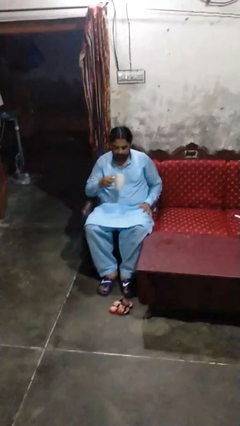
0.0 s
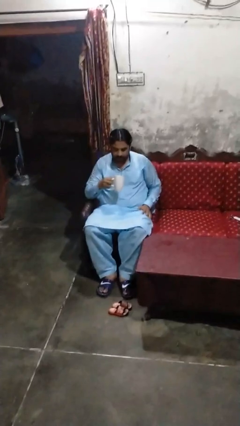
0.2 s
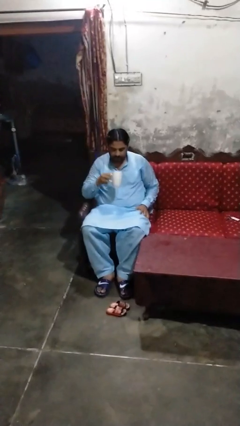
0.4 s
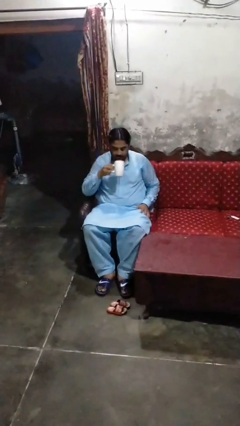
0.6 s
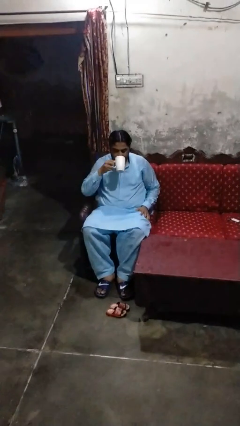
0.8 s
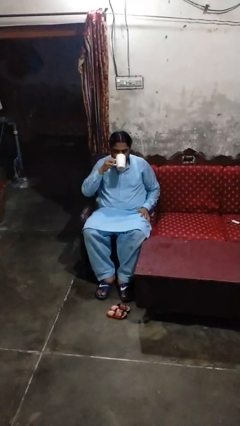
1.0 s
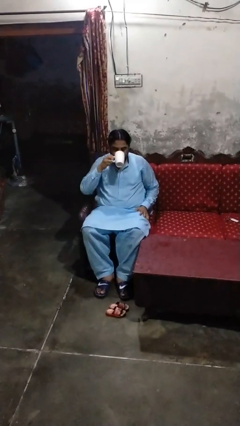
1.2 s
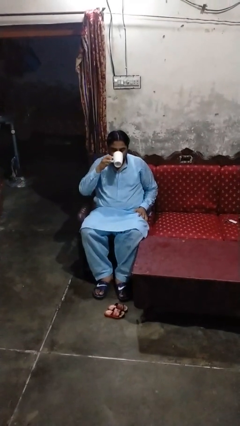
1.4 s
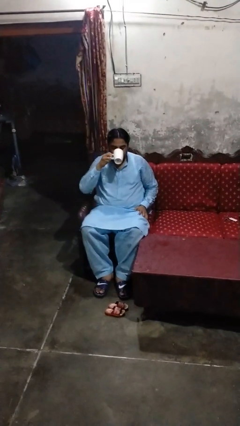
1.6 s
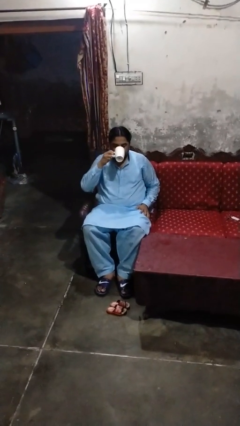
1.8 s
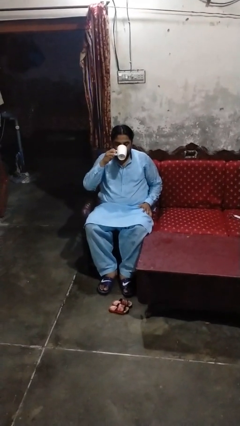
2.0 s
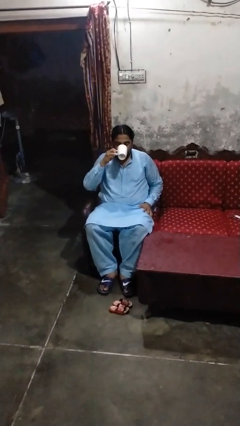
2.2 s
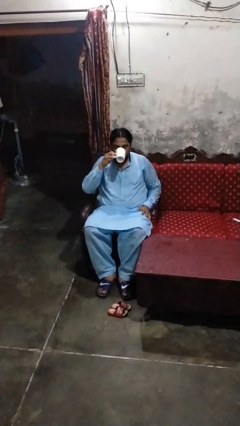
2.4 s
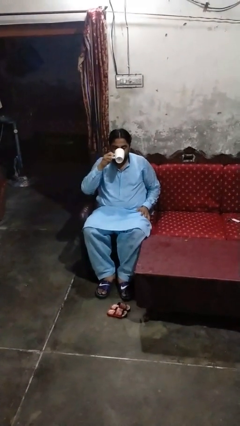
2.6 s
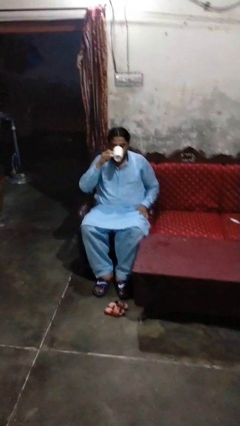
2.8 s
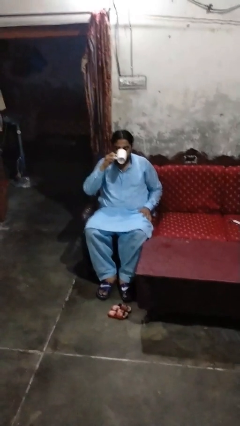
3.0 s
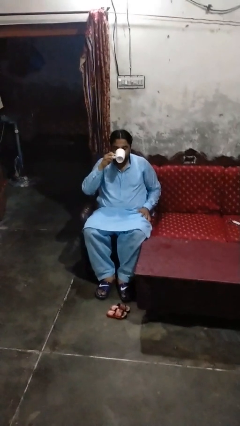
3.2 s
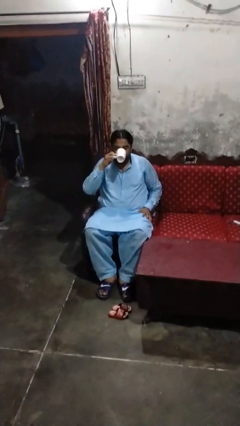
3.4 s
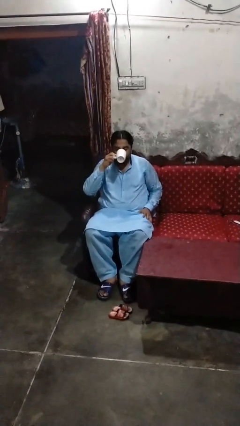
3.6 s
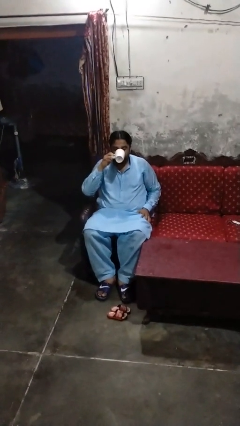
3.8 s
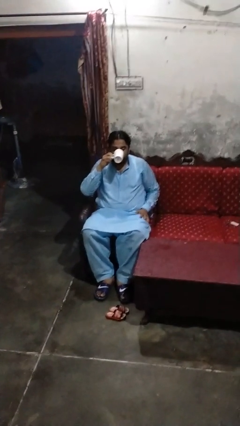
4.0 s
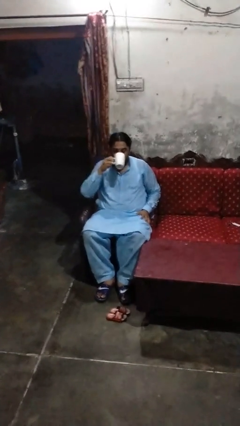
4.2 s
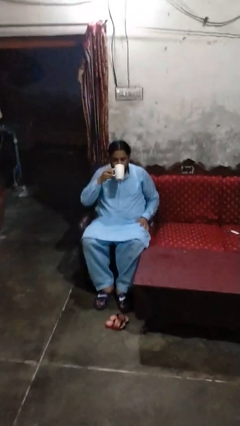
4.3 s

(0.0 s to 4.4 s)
person drinks from mug

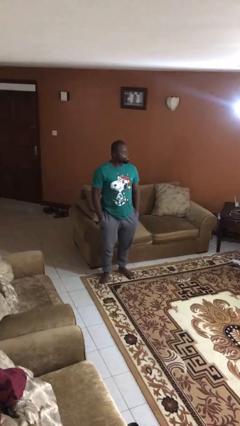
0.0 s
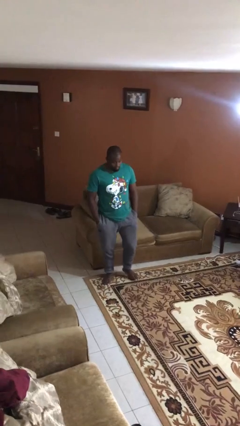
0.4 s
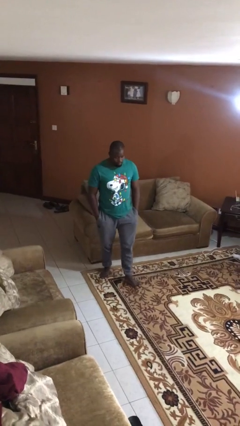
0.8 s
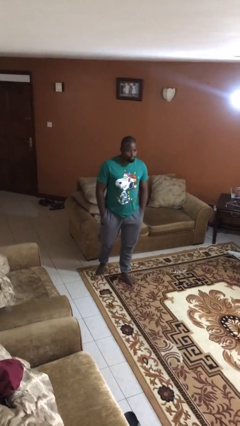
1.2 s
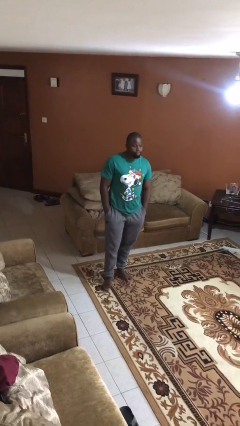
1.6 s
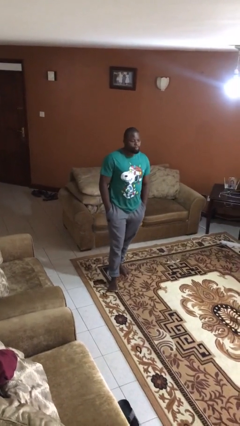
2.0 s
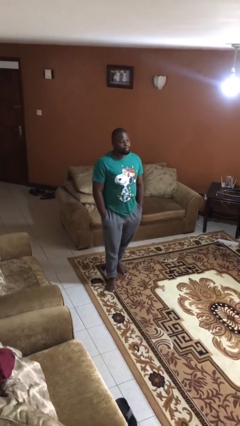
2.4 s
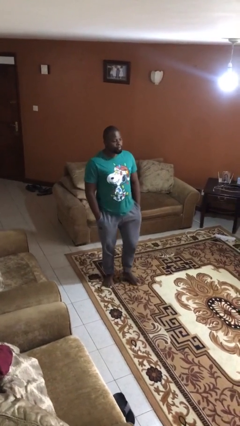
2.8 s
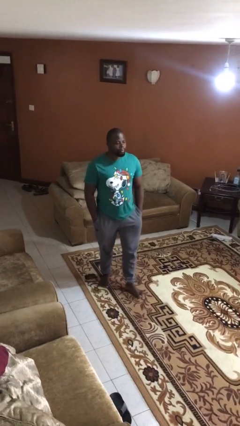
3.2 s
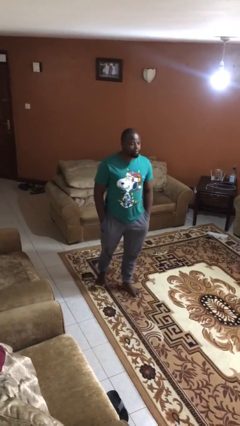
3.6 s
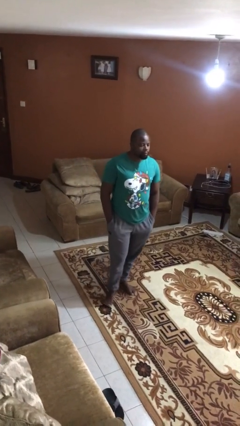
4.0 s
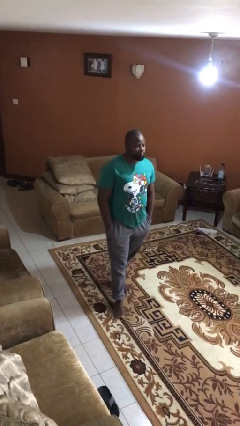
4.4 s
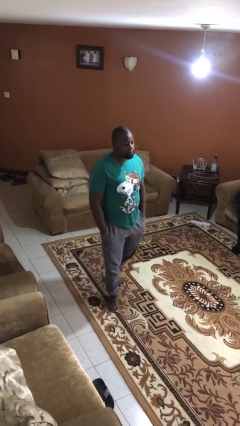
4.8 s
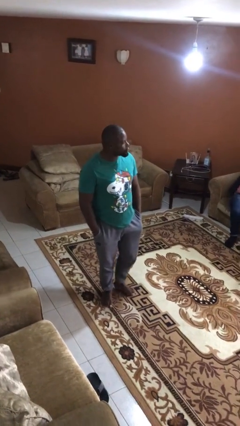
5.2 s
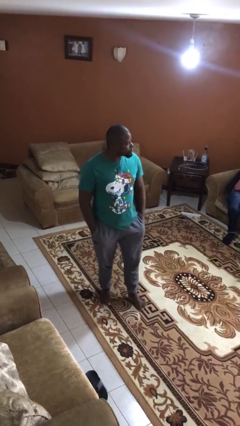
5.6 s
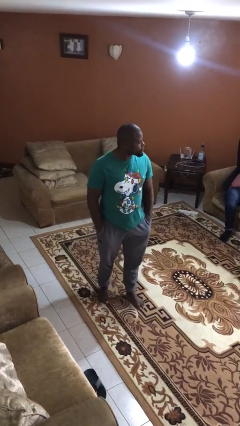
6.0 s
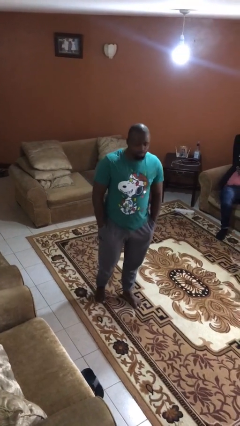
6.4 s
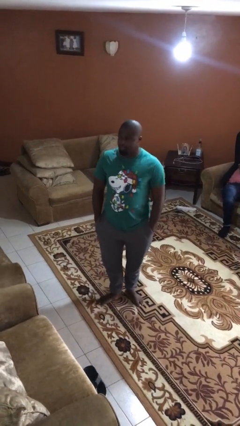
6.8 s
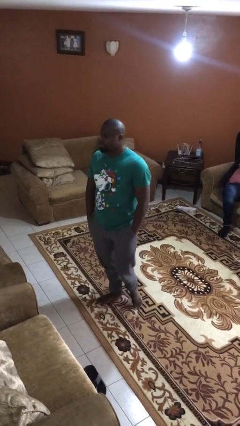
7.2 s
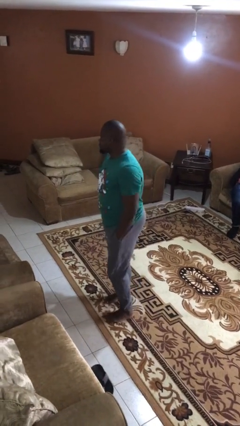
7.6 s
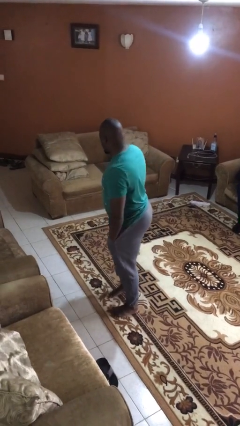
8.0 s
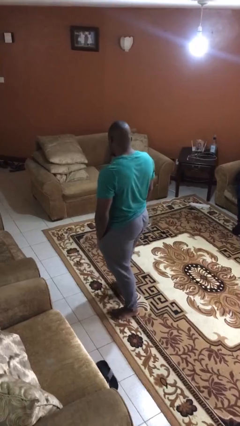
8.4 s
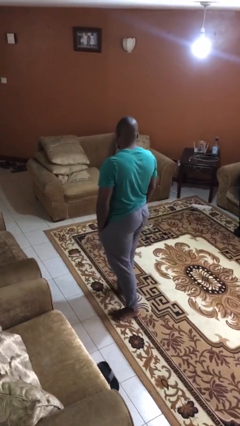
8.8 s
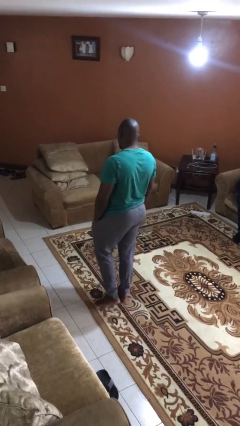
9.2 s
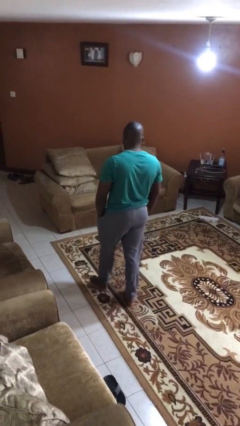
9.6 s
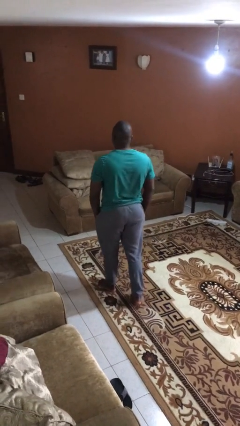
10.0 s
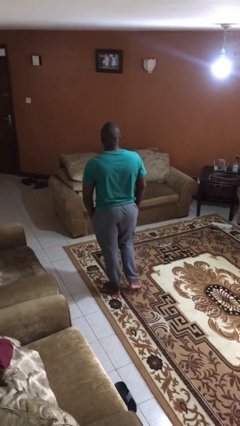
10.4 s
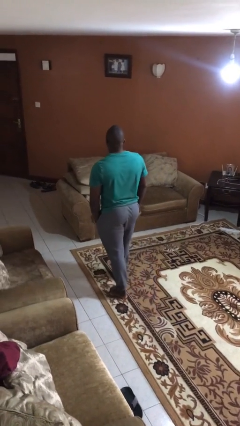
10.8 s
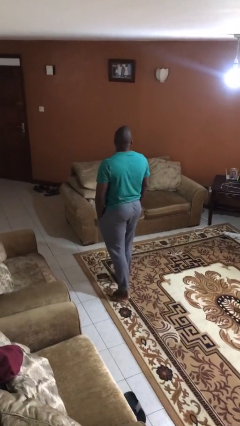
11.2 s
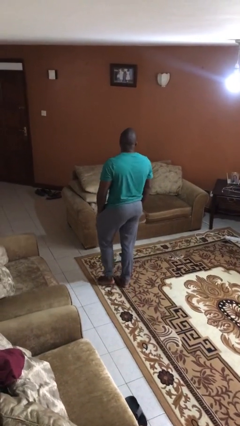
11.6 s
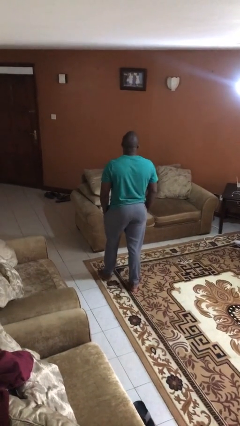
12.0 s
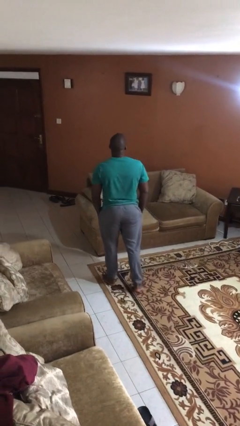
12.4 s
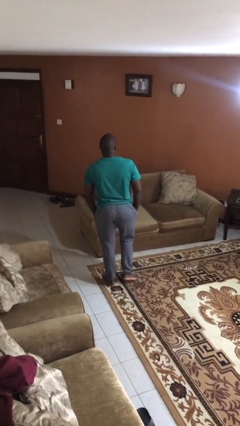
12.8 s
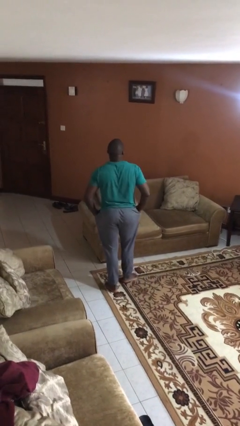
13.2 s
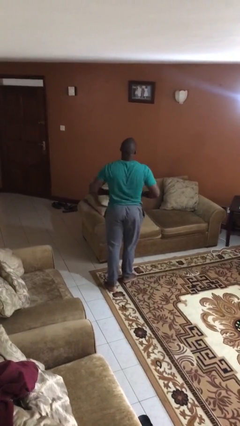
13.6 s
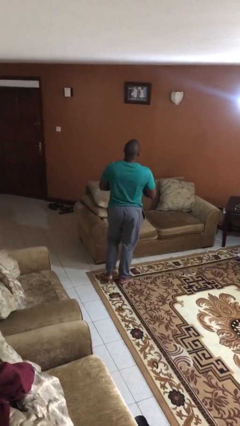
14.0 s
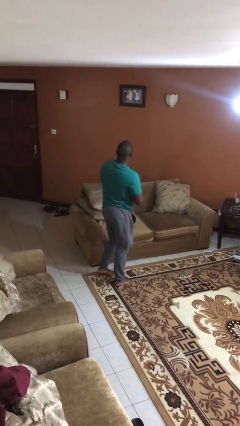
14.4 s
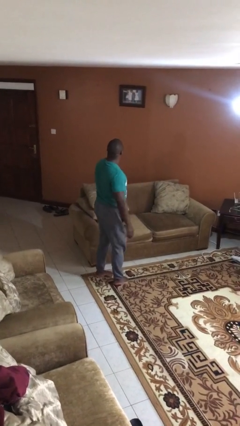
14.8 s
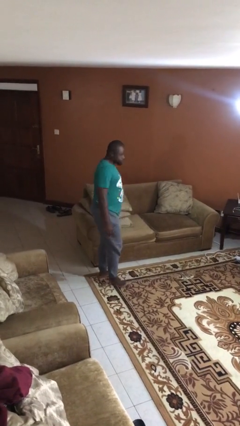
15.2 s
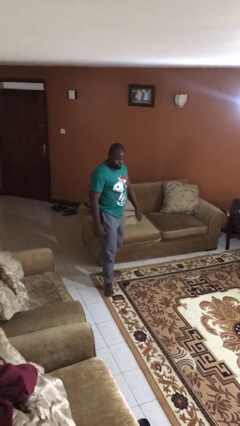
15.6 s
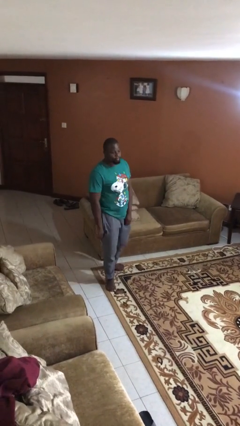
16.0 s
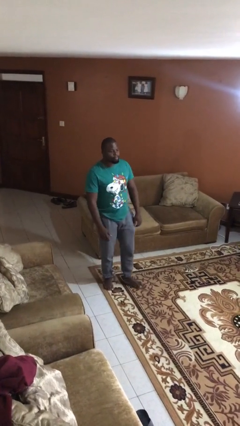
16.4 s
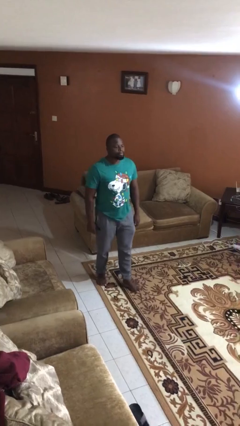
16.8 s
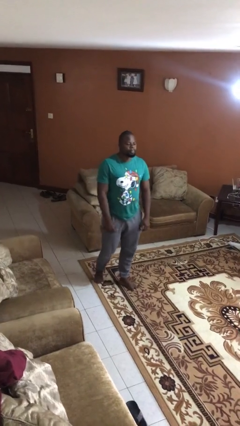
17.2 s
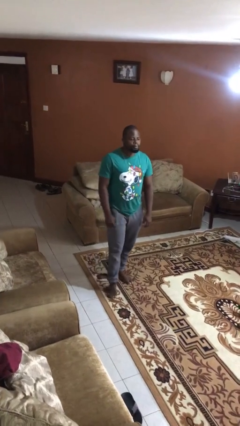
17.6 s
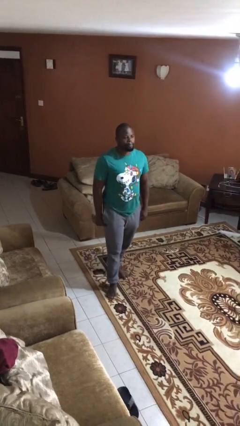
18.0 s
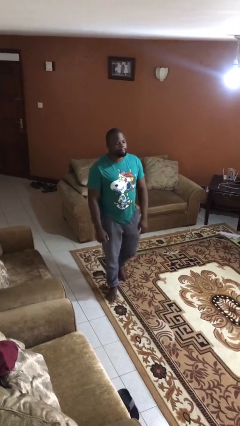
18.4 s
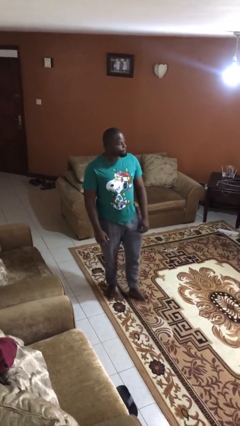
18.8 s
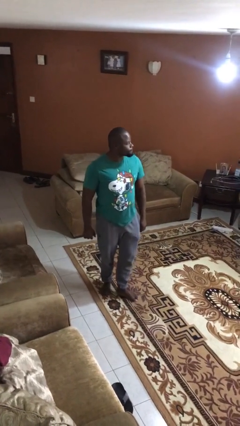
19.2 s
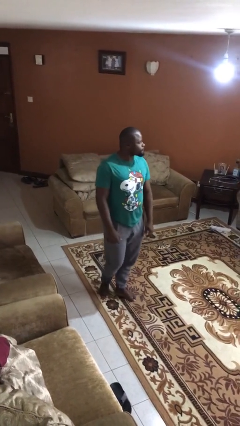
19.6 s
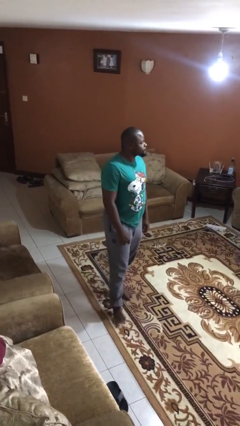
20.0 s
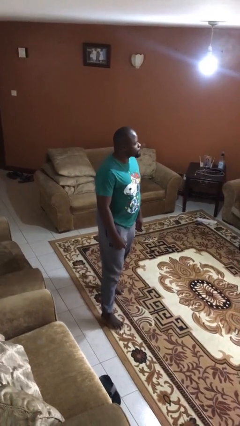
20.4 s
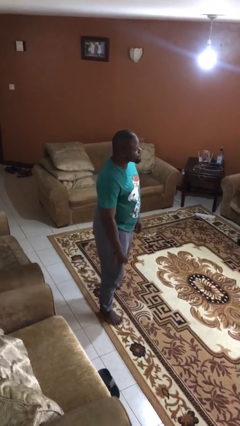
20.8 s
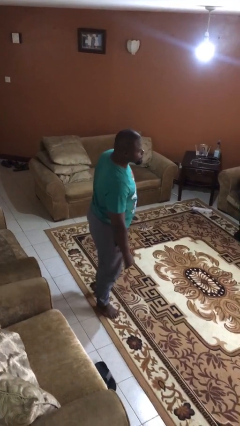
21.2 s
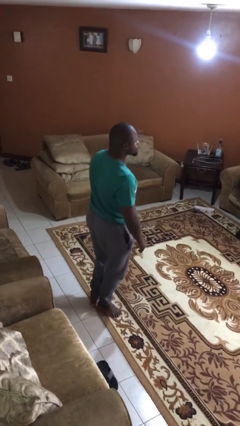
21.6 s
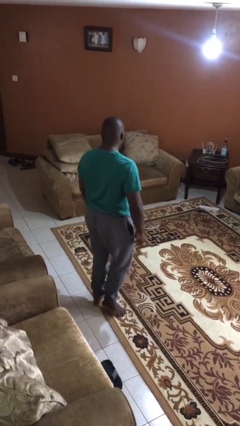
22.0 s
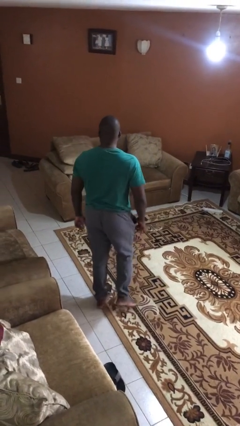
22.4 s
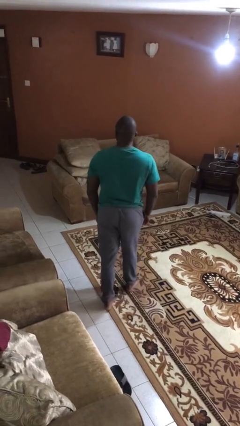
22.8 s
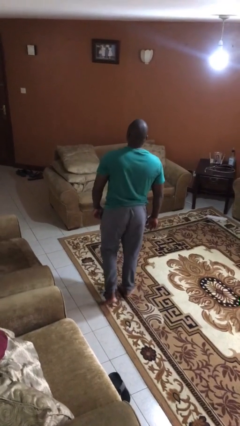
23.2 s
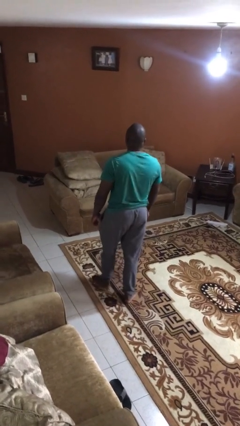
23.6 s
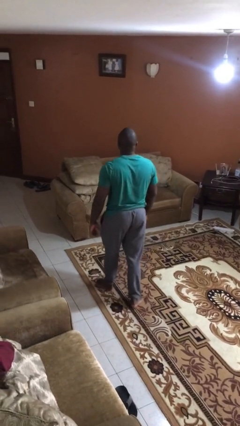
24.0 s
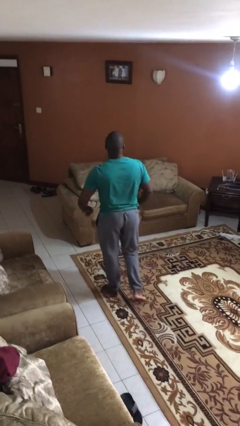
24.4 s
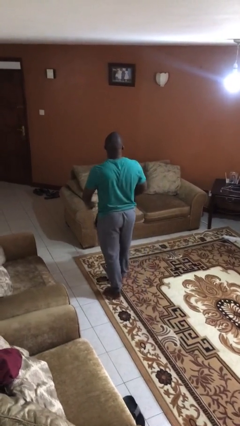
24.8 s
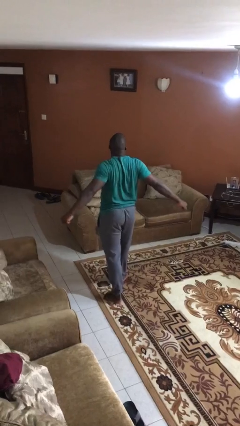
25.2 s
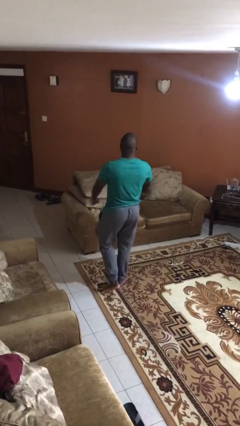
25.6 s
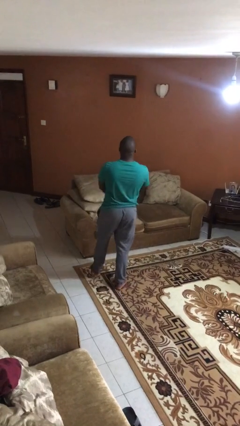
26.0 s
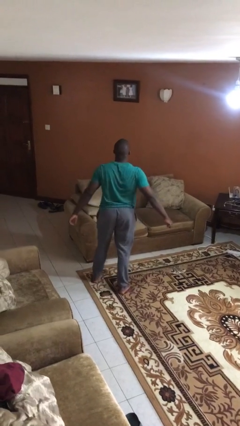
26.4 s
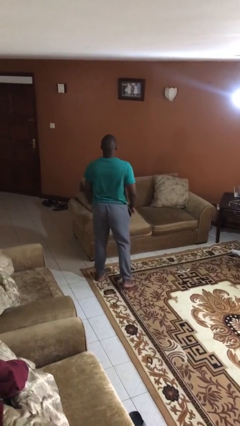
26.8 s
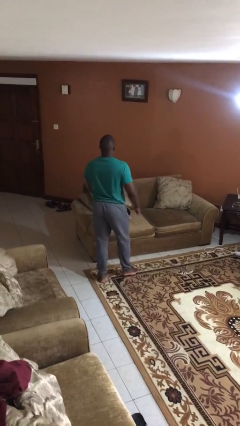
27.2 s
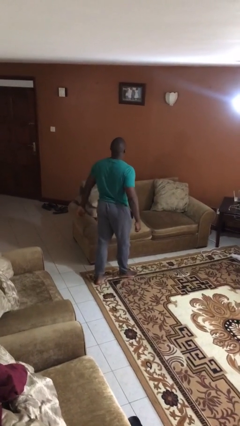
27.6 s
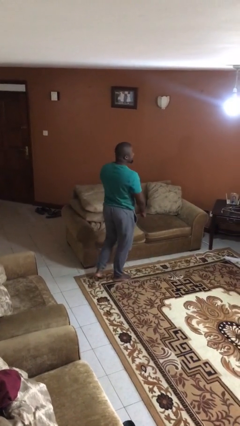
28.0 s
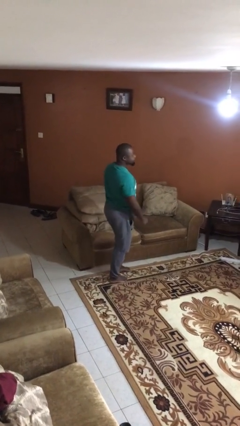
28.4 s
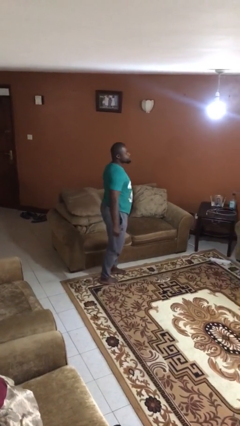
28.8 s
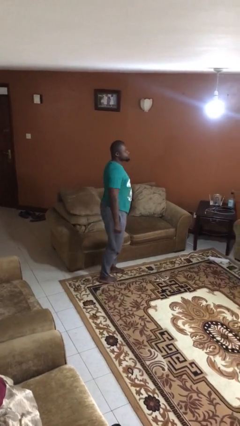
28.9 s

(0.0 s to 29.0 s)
person walks
